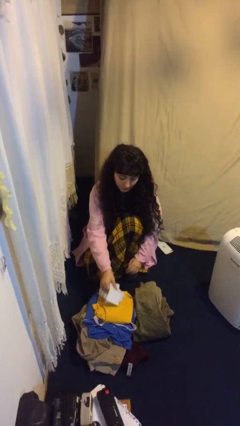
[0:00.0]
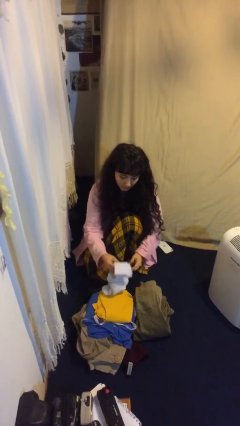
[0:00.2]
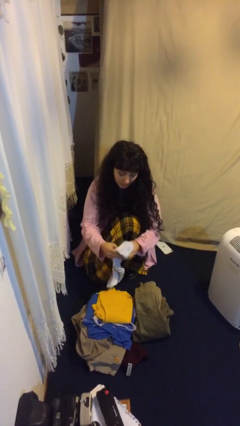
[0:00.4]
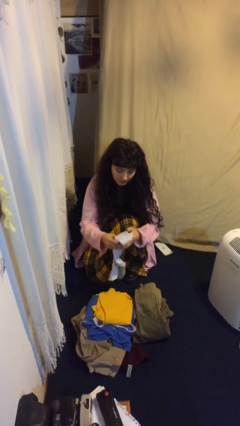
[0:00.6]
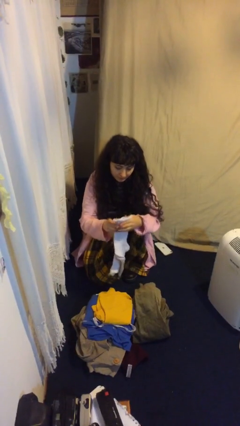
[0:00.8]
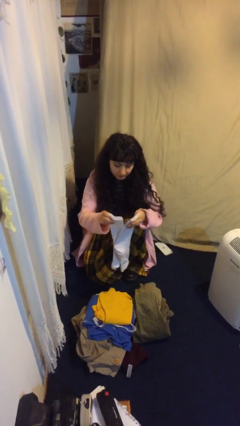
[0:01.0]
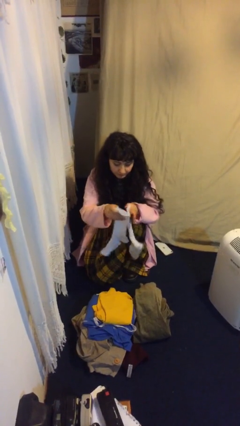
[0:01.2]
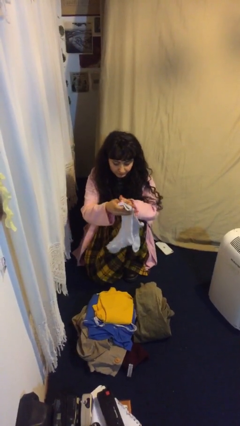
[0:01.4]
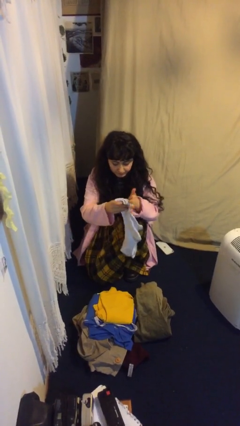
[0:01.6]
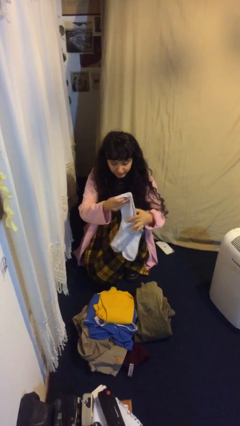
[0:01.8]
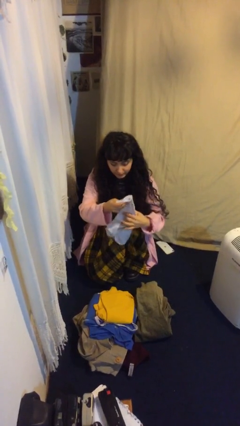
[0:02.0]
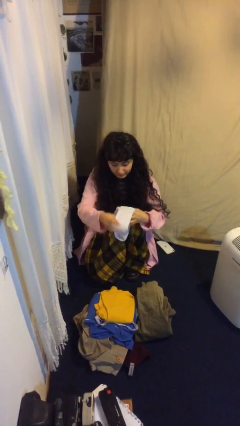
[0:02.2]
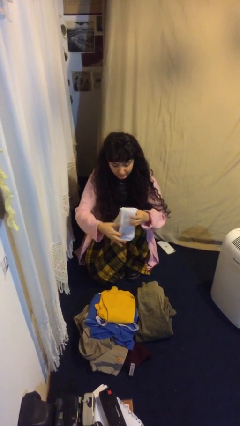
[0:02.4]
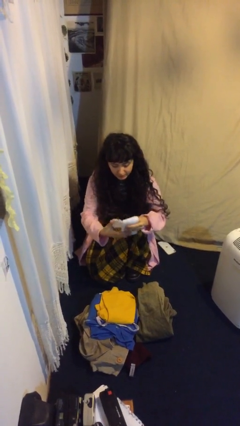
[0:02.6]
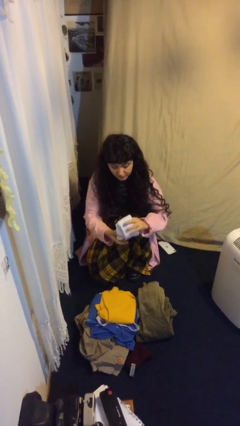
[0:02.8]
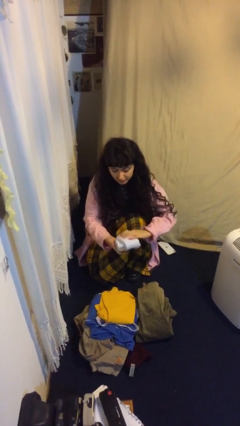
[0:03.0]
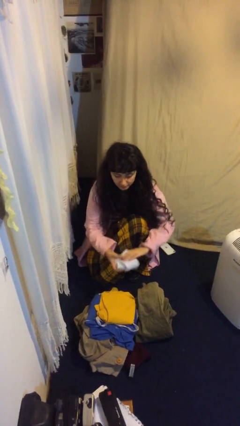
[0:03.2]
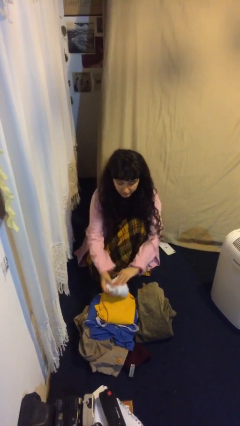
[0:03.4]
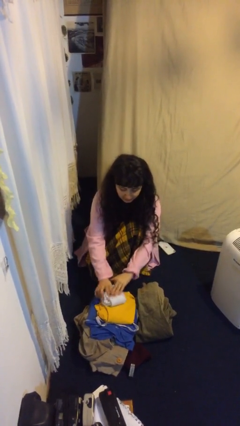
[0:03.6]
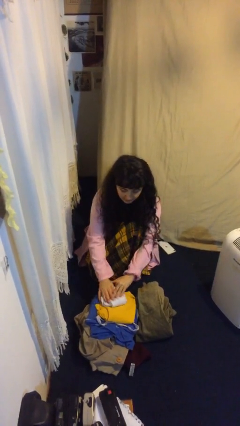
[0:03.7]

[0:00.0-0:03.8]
person folds socks

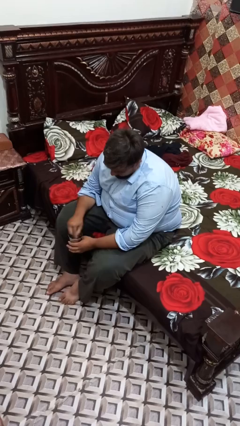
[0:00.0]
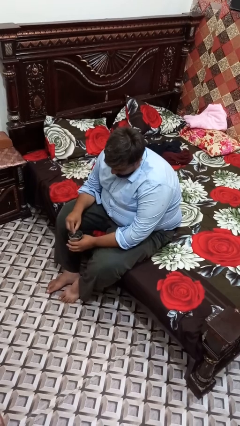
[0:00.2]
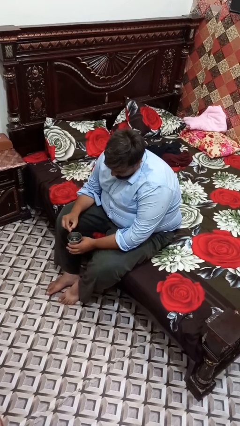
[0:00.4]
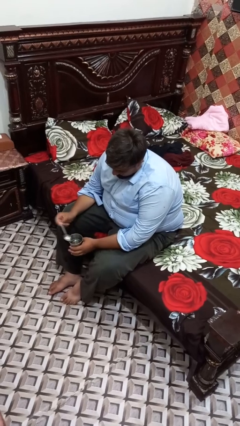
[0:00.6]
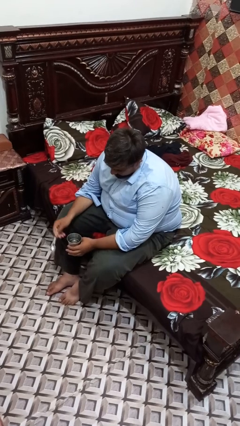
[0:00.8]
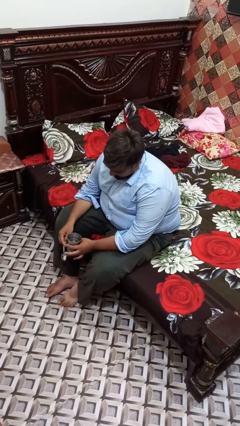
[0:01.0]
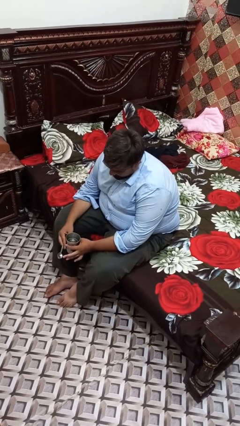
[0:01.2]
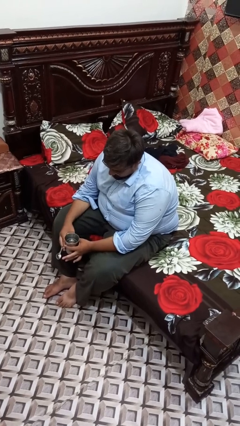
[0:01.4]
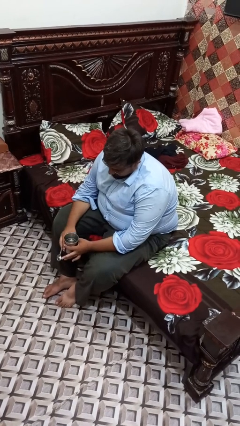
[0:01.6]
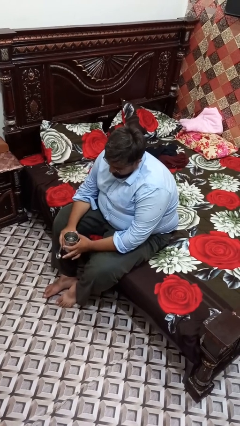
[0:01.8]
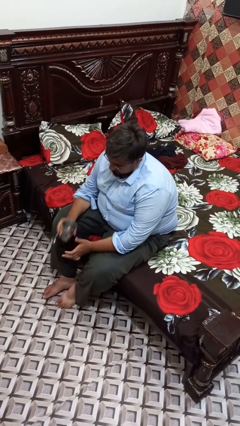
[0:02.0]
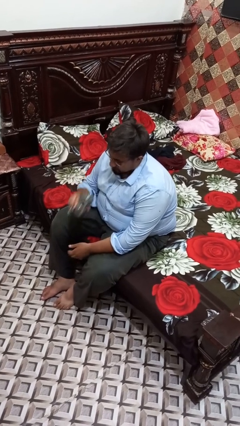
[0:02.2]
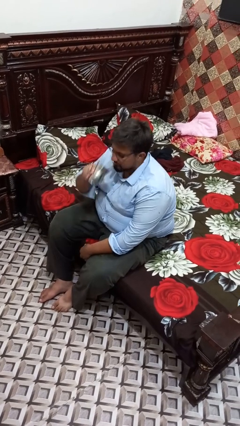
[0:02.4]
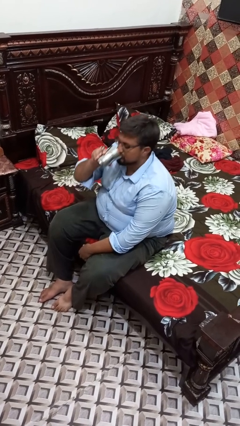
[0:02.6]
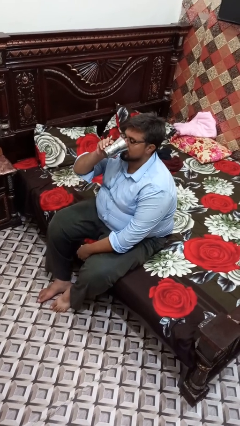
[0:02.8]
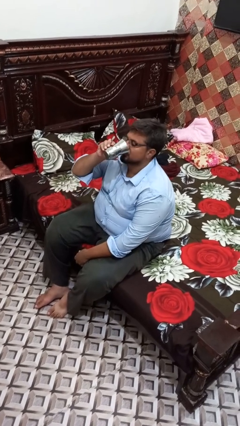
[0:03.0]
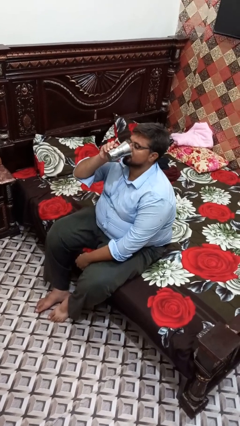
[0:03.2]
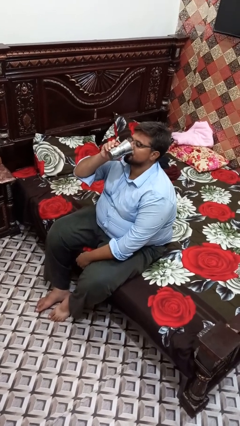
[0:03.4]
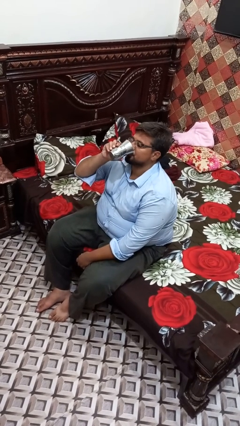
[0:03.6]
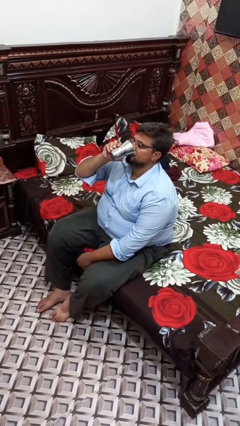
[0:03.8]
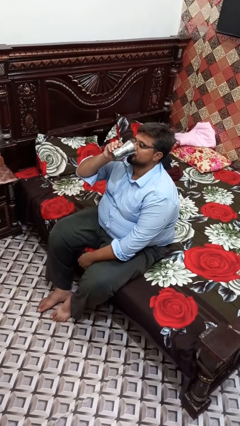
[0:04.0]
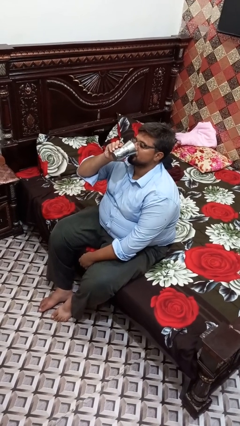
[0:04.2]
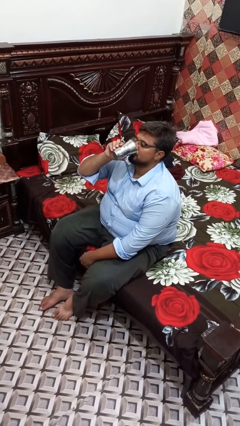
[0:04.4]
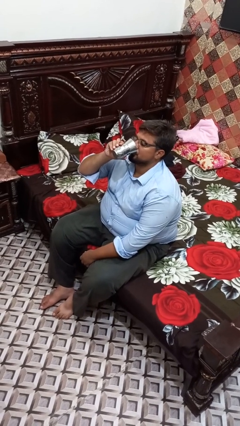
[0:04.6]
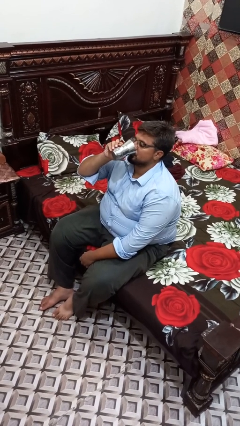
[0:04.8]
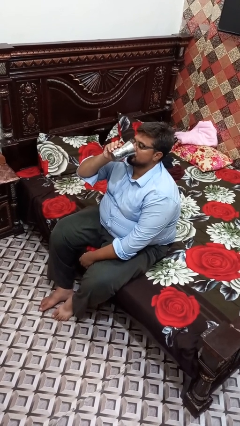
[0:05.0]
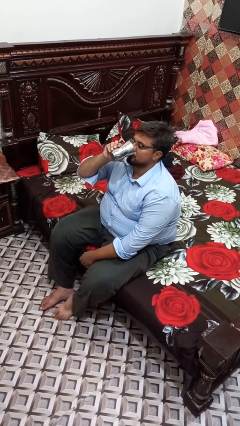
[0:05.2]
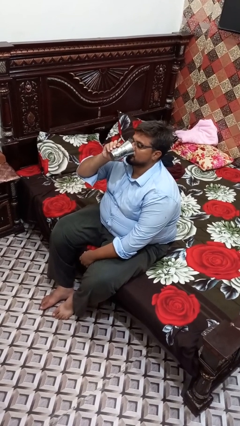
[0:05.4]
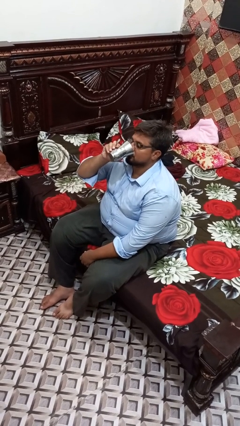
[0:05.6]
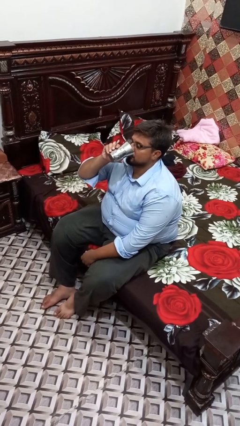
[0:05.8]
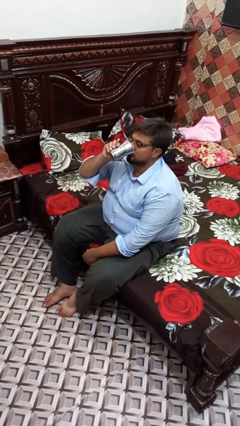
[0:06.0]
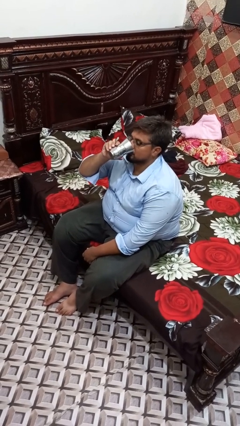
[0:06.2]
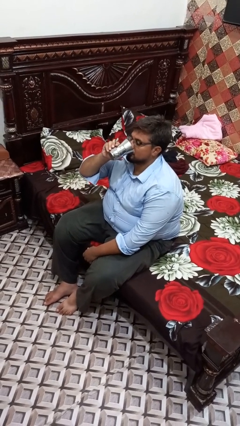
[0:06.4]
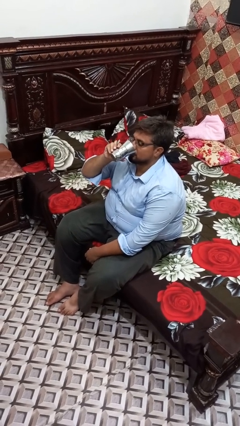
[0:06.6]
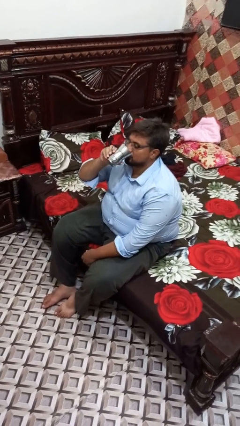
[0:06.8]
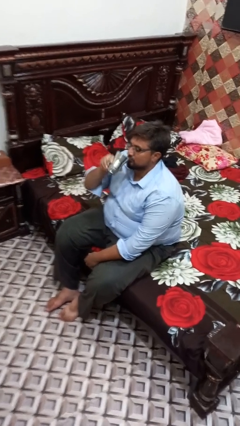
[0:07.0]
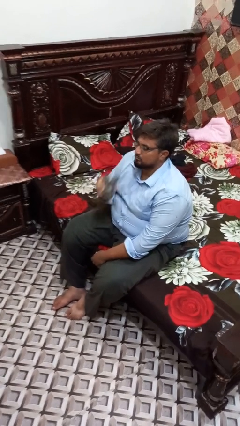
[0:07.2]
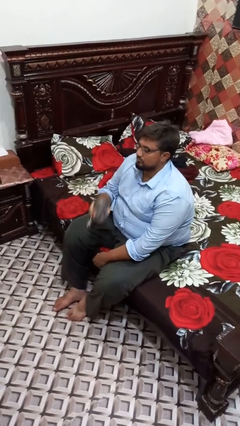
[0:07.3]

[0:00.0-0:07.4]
person drinks from mug

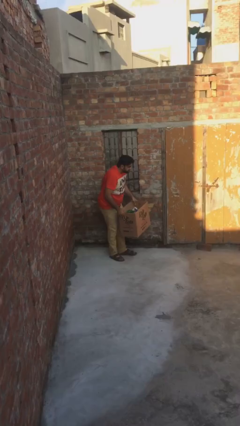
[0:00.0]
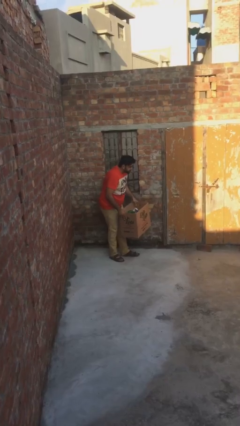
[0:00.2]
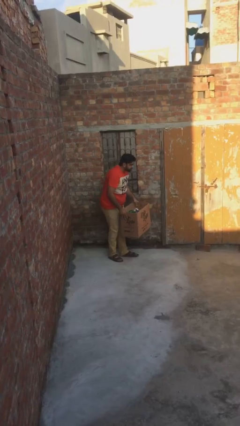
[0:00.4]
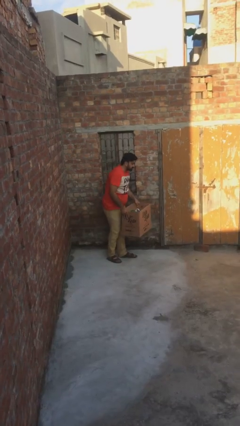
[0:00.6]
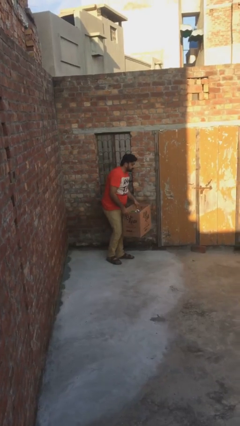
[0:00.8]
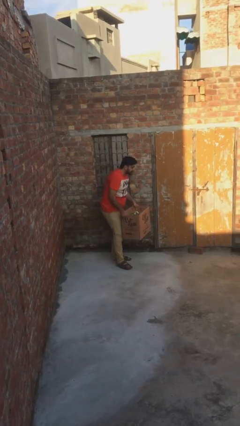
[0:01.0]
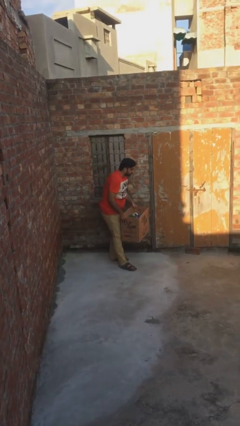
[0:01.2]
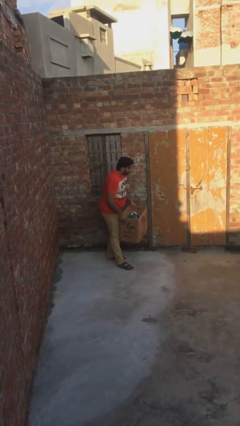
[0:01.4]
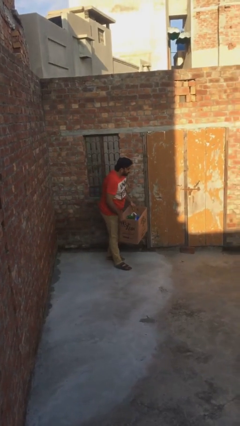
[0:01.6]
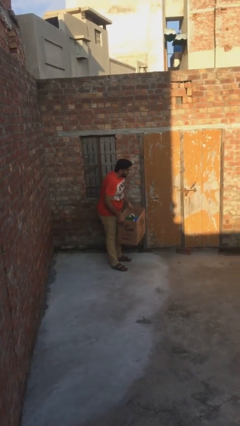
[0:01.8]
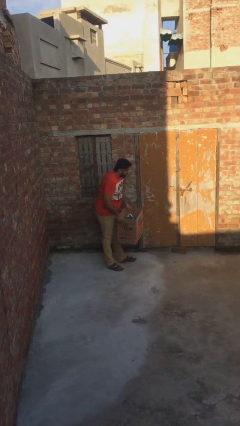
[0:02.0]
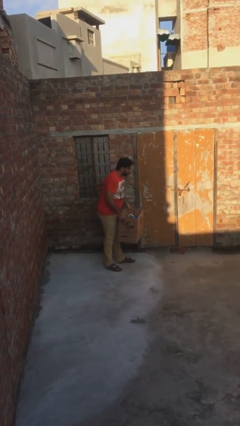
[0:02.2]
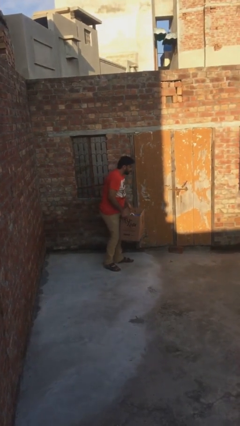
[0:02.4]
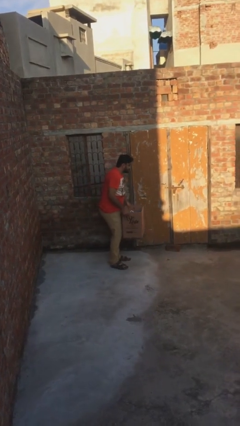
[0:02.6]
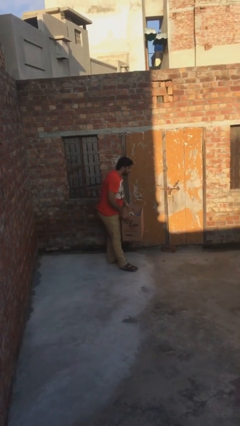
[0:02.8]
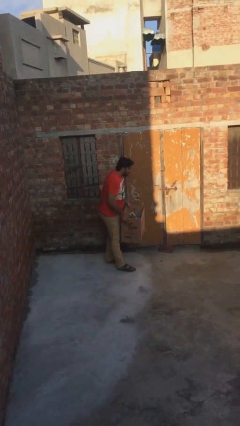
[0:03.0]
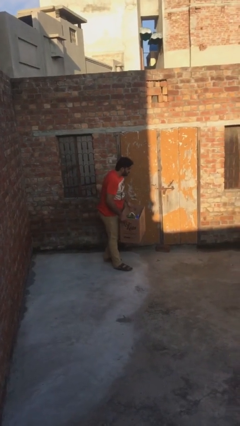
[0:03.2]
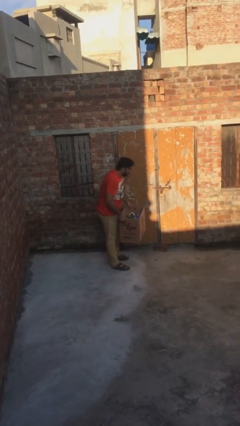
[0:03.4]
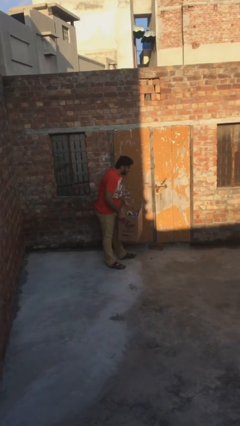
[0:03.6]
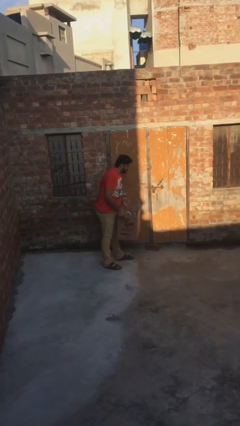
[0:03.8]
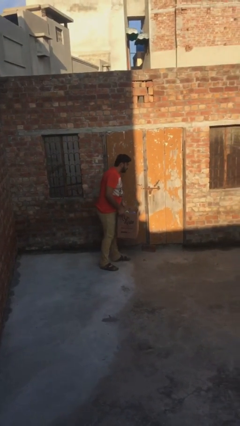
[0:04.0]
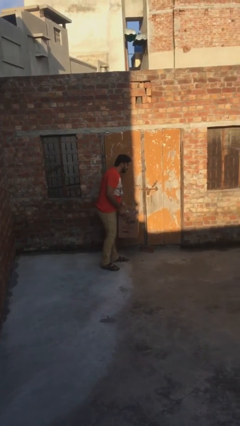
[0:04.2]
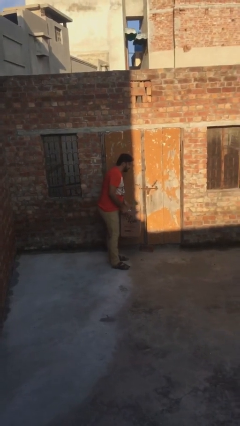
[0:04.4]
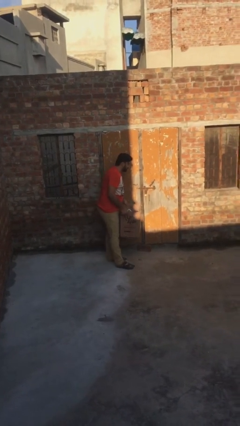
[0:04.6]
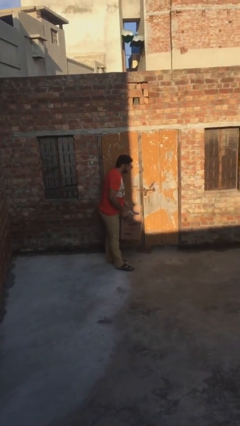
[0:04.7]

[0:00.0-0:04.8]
person carries heavy object

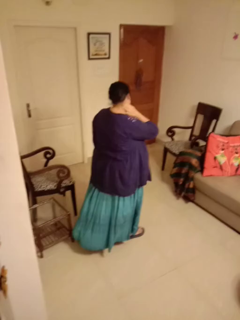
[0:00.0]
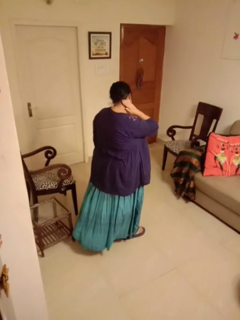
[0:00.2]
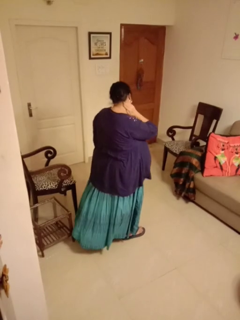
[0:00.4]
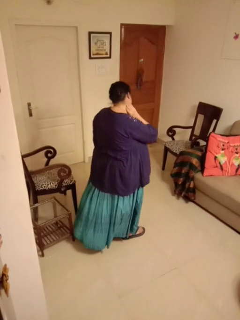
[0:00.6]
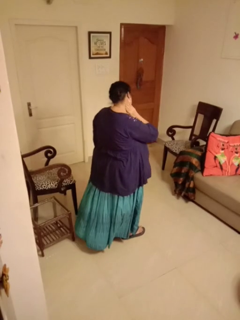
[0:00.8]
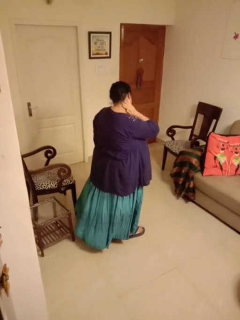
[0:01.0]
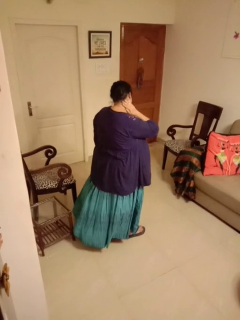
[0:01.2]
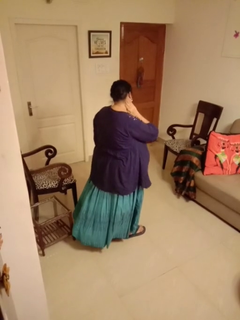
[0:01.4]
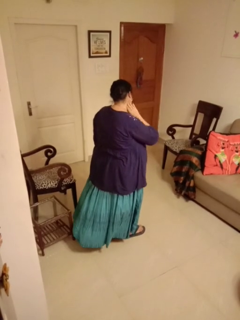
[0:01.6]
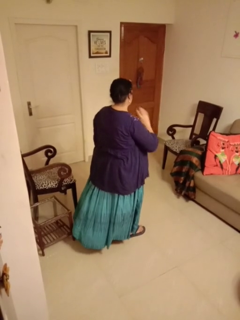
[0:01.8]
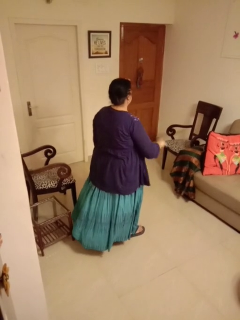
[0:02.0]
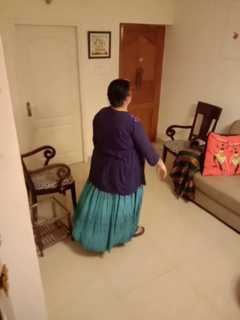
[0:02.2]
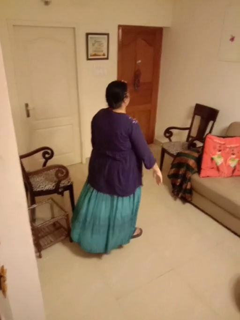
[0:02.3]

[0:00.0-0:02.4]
person rubs neck
